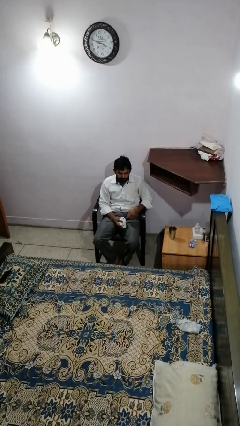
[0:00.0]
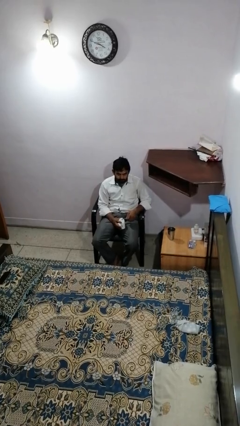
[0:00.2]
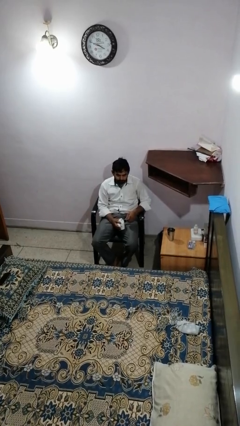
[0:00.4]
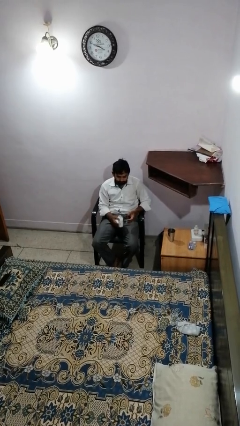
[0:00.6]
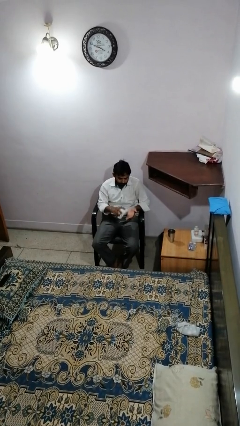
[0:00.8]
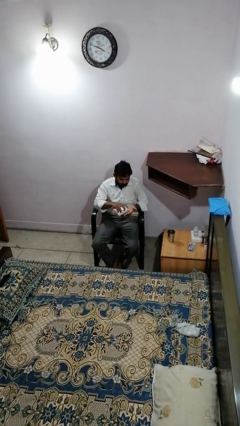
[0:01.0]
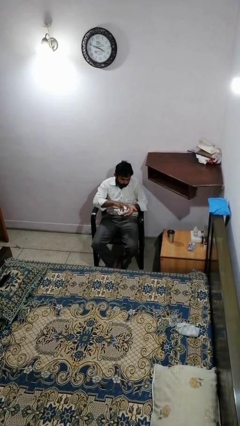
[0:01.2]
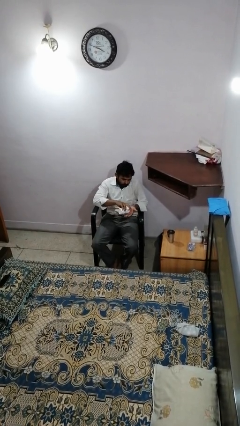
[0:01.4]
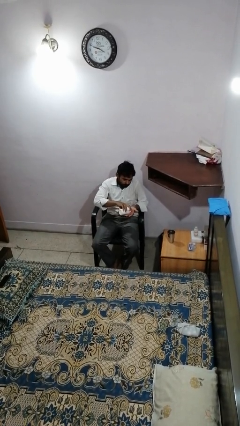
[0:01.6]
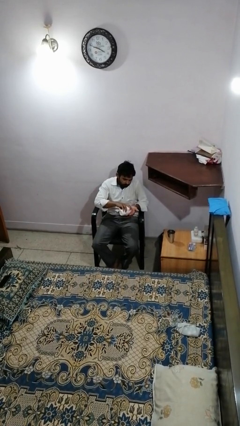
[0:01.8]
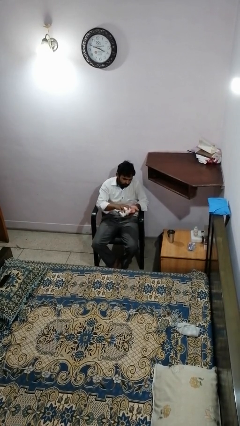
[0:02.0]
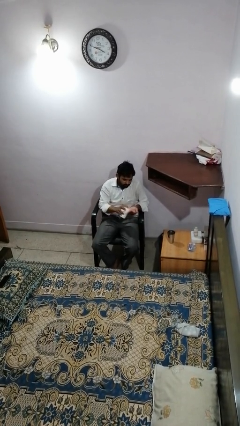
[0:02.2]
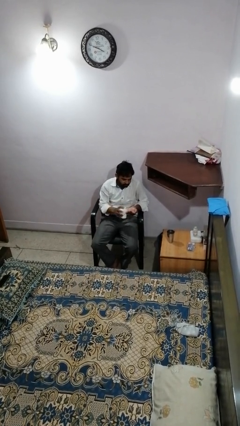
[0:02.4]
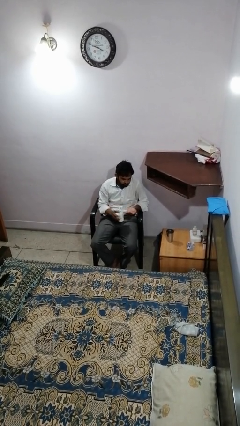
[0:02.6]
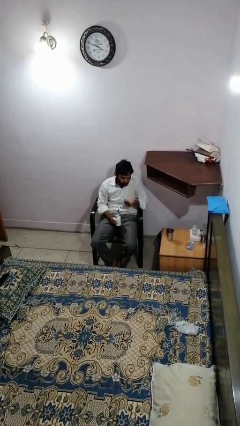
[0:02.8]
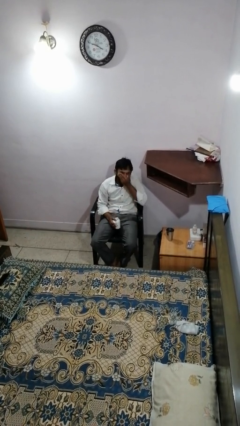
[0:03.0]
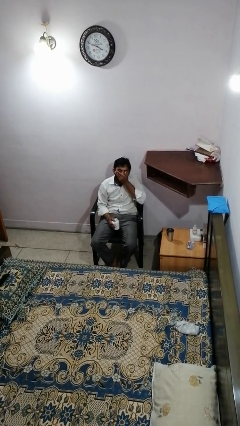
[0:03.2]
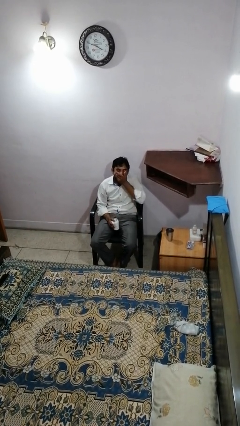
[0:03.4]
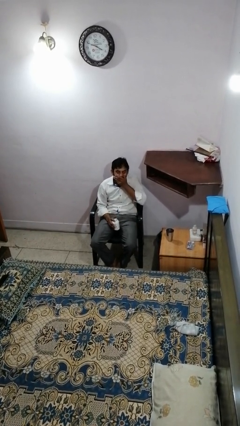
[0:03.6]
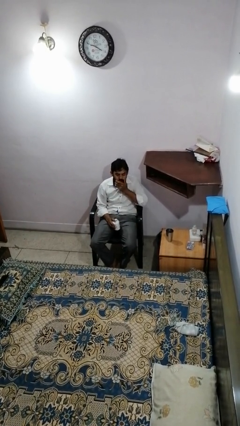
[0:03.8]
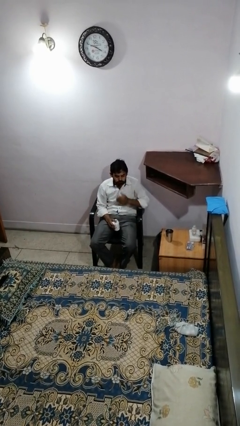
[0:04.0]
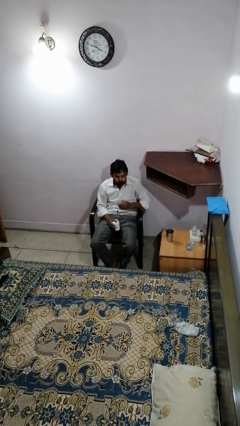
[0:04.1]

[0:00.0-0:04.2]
person takes medicine pills

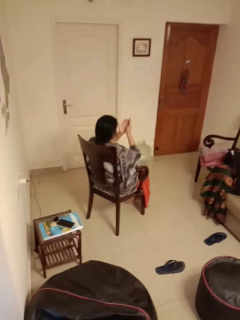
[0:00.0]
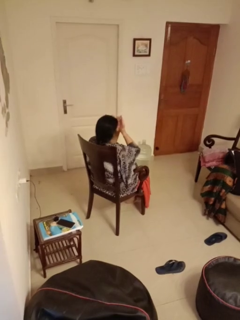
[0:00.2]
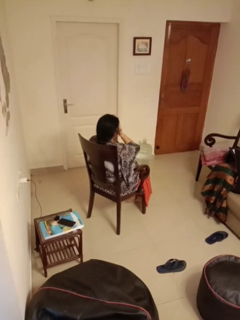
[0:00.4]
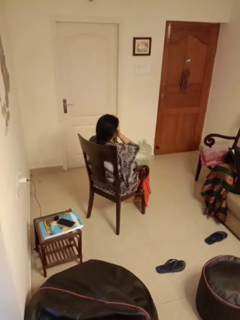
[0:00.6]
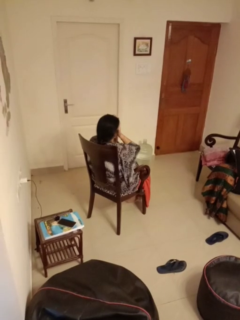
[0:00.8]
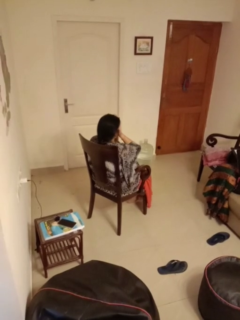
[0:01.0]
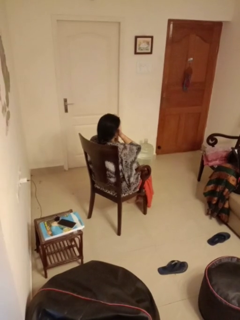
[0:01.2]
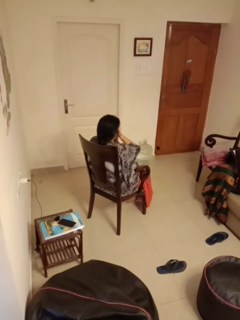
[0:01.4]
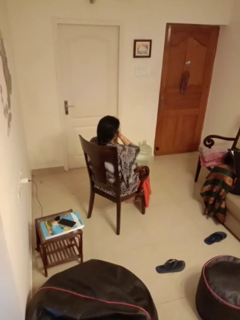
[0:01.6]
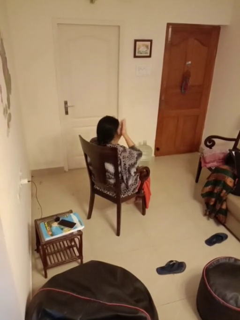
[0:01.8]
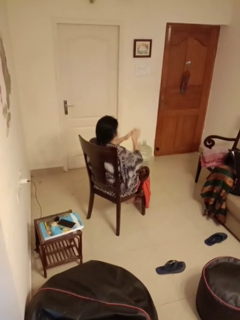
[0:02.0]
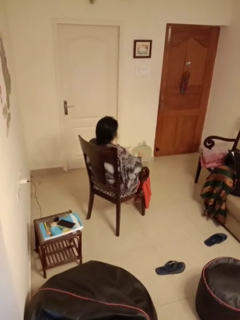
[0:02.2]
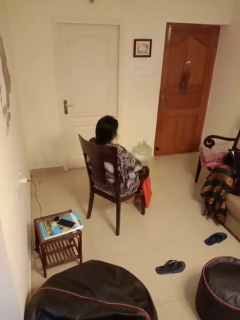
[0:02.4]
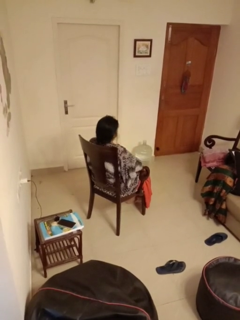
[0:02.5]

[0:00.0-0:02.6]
person covers face with hands

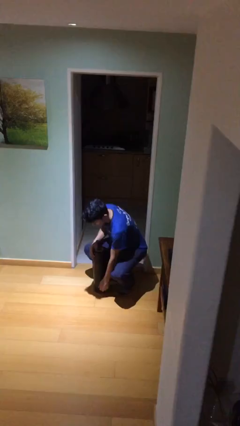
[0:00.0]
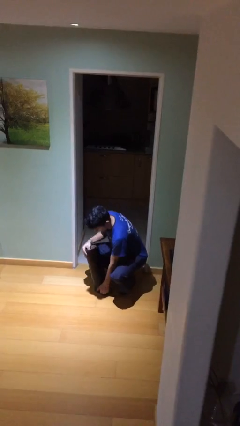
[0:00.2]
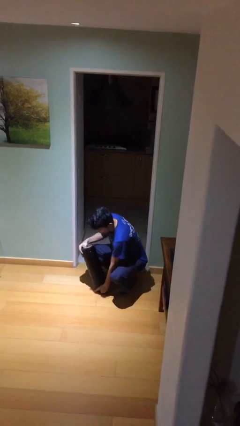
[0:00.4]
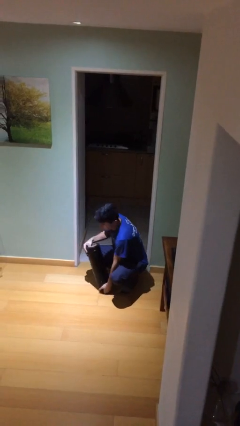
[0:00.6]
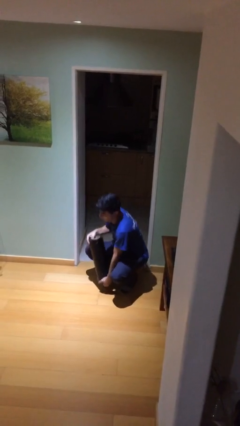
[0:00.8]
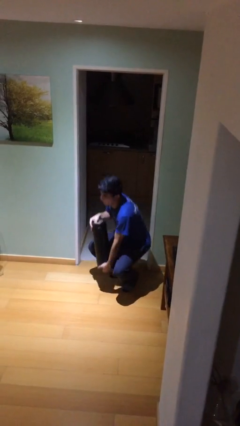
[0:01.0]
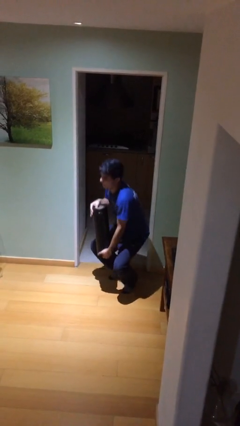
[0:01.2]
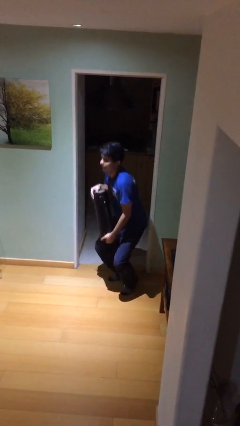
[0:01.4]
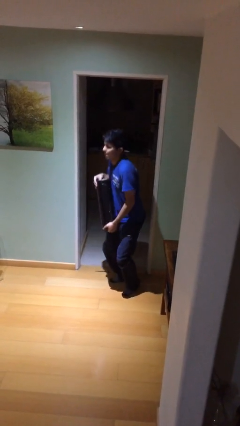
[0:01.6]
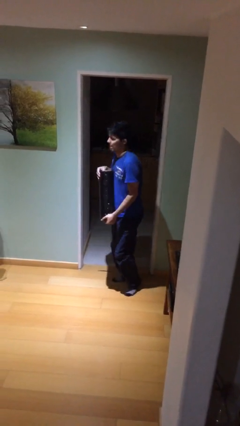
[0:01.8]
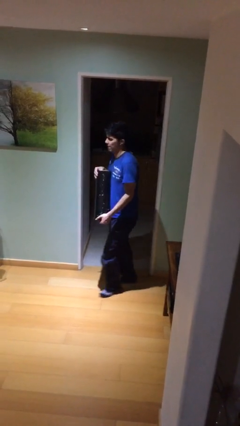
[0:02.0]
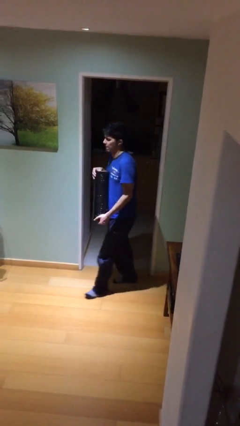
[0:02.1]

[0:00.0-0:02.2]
person picks up object from floor

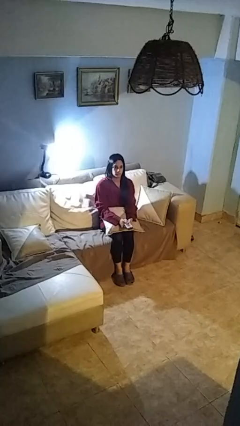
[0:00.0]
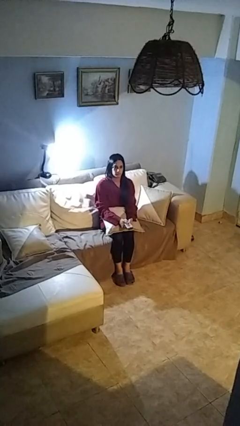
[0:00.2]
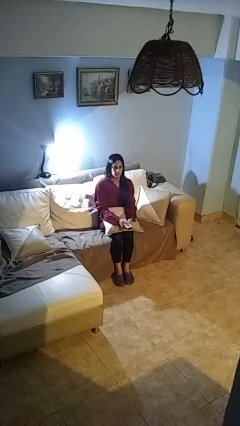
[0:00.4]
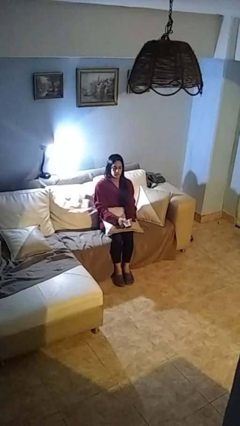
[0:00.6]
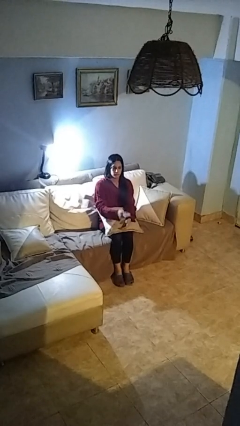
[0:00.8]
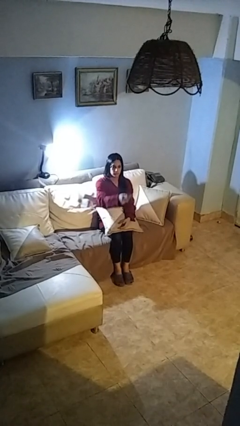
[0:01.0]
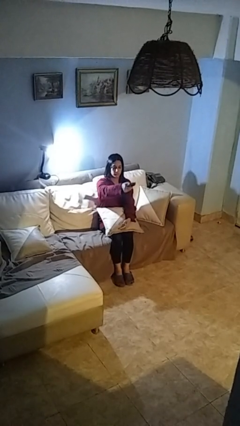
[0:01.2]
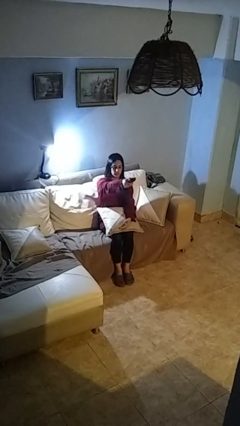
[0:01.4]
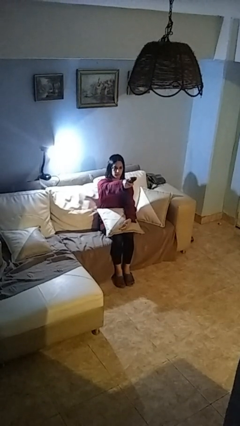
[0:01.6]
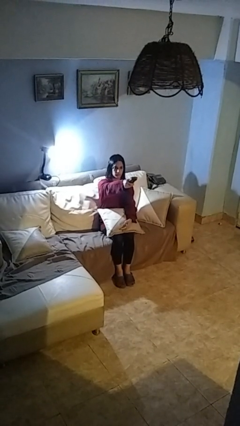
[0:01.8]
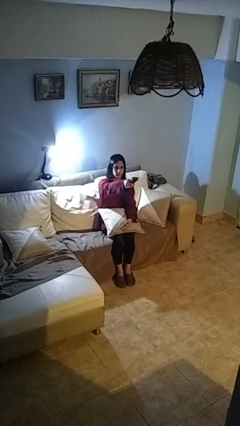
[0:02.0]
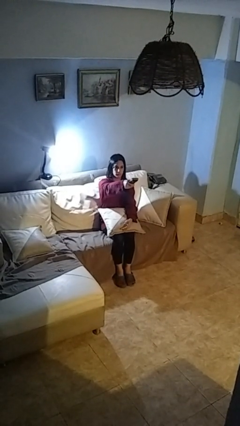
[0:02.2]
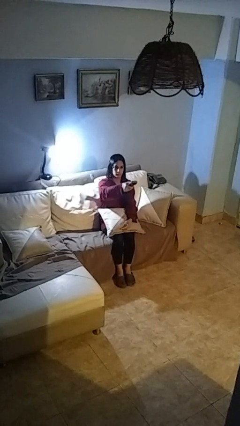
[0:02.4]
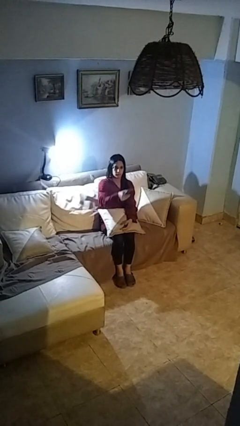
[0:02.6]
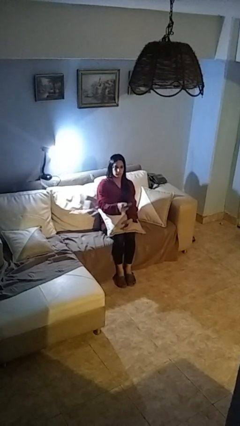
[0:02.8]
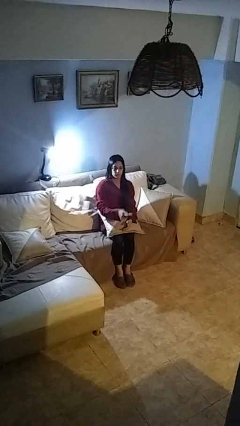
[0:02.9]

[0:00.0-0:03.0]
person uses television remote

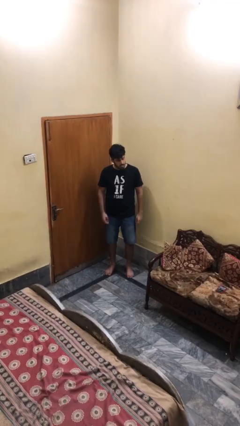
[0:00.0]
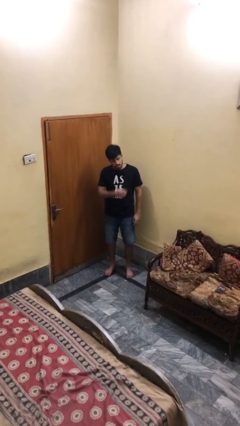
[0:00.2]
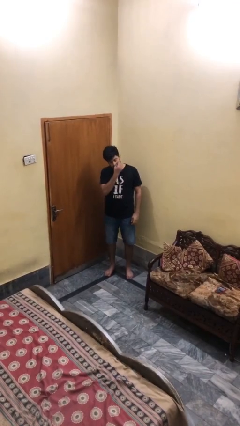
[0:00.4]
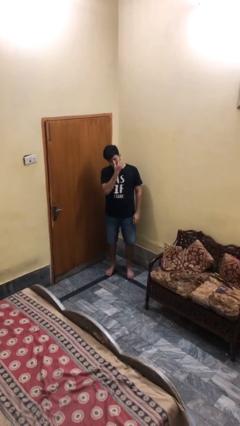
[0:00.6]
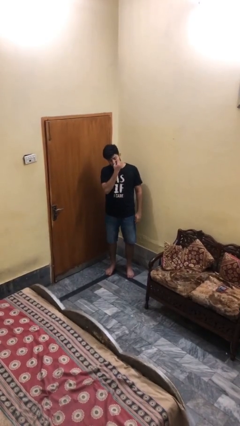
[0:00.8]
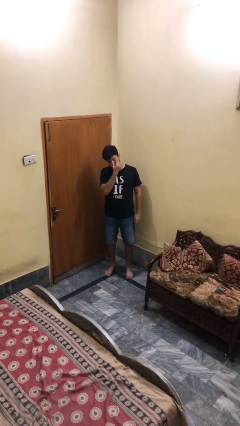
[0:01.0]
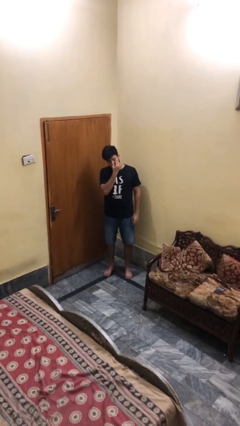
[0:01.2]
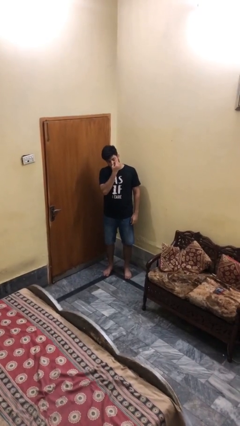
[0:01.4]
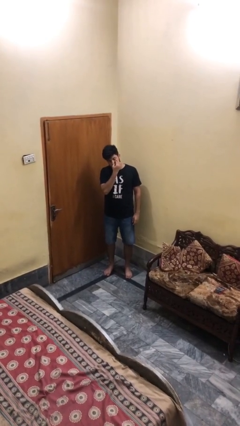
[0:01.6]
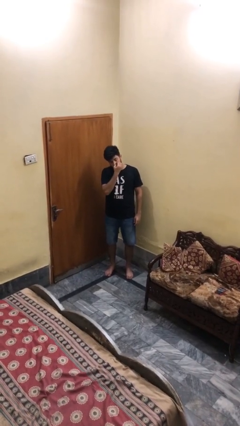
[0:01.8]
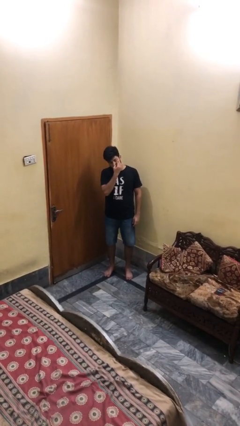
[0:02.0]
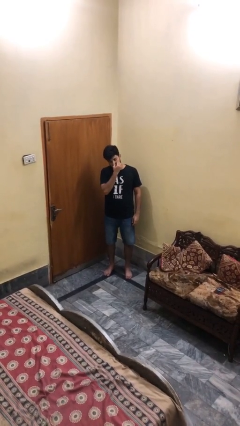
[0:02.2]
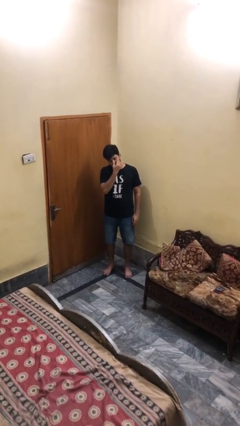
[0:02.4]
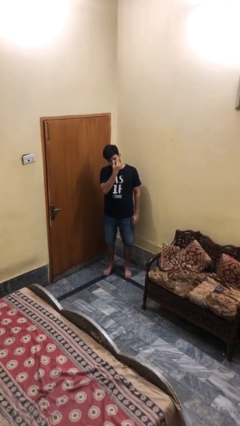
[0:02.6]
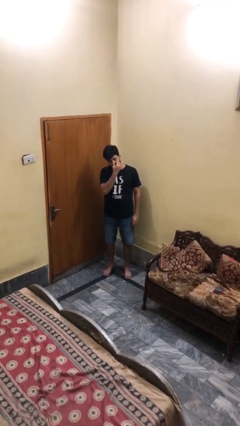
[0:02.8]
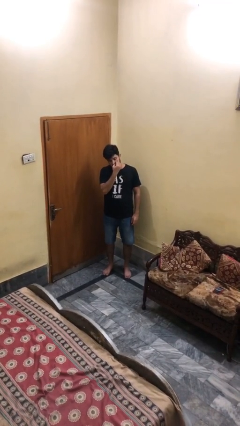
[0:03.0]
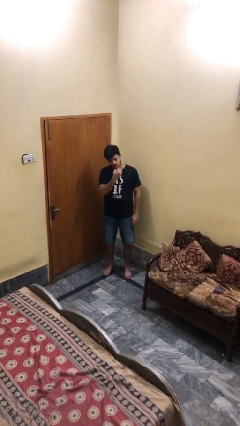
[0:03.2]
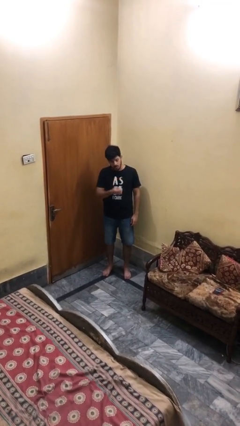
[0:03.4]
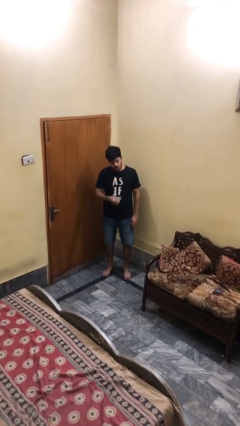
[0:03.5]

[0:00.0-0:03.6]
person scratches face

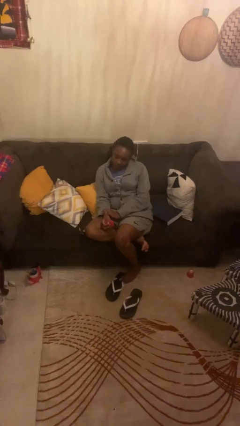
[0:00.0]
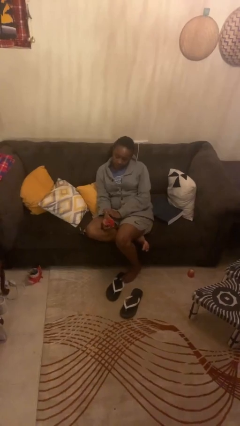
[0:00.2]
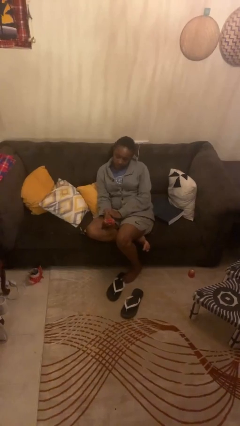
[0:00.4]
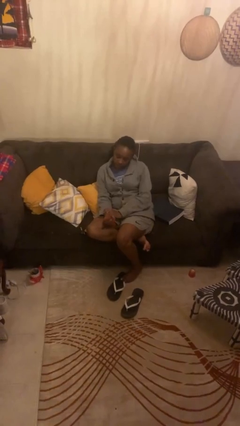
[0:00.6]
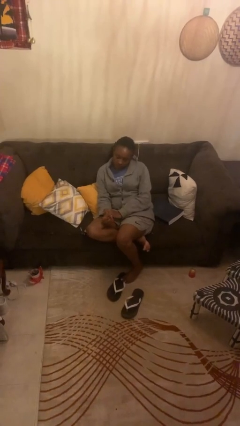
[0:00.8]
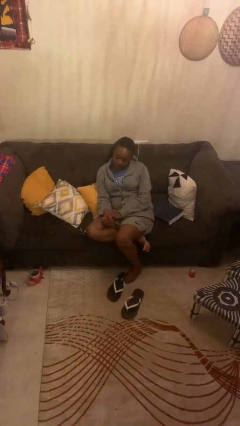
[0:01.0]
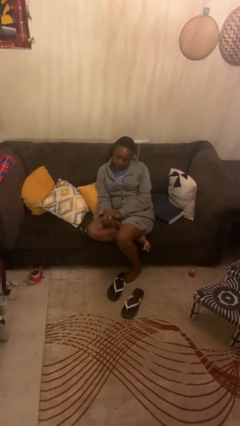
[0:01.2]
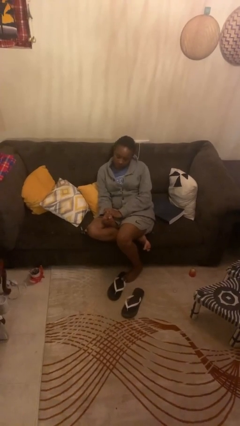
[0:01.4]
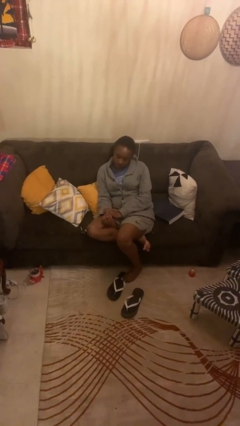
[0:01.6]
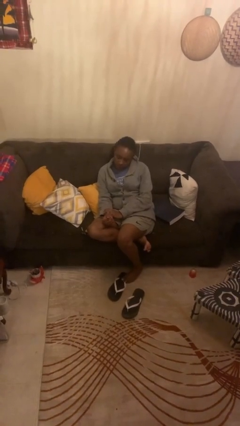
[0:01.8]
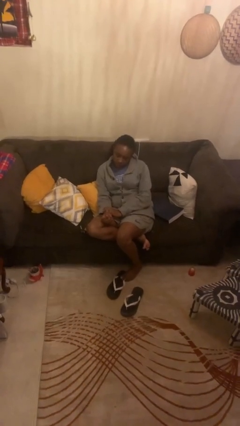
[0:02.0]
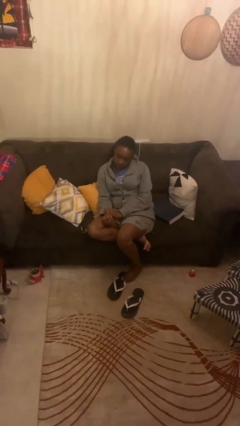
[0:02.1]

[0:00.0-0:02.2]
person squeezes object
